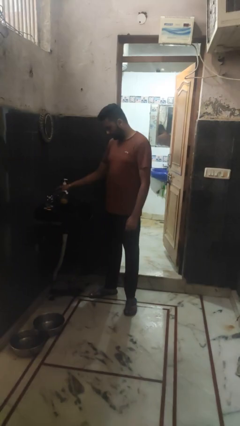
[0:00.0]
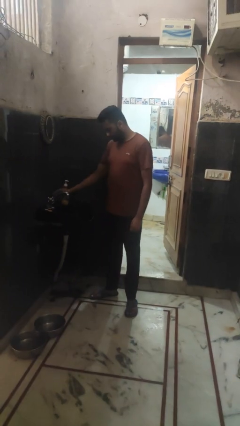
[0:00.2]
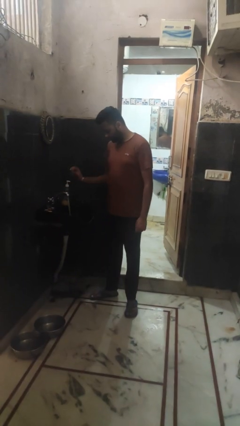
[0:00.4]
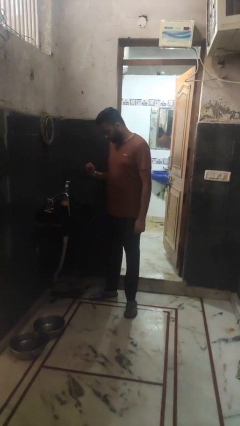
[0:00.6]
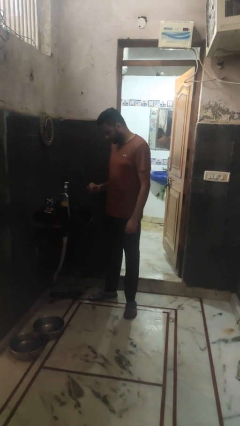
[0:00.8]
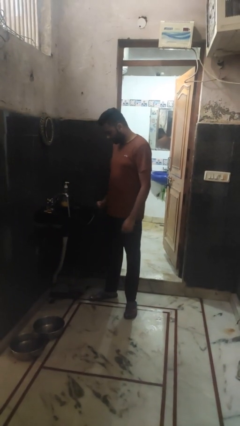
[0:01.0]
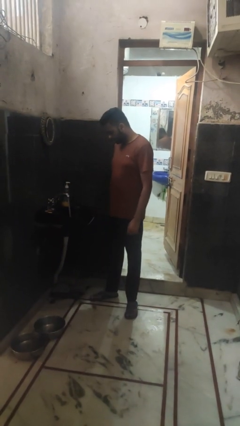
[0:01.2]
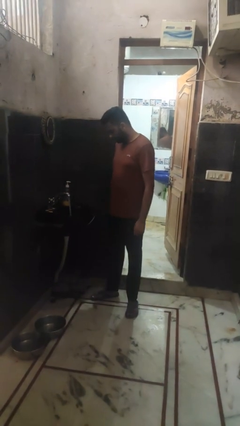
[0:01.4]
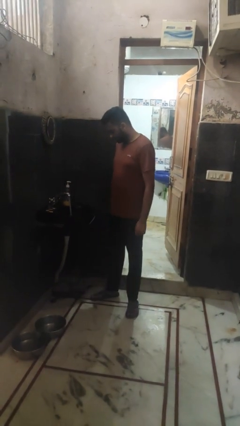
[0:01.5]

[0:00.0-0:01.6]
person turns on faucet

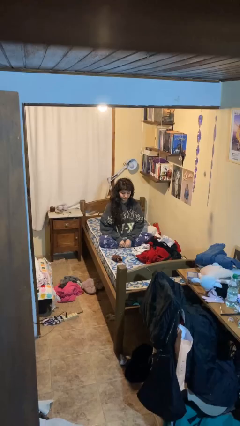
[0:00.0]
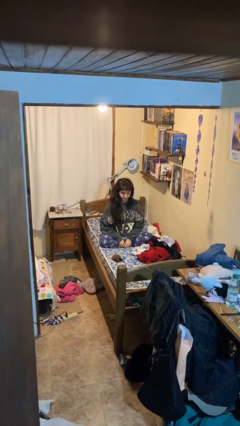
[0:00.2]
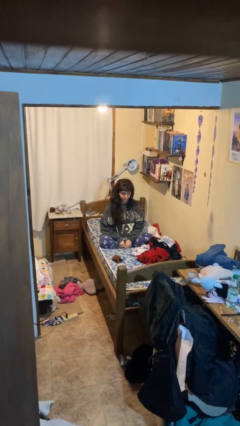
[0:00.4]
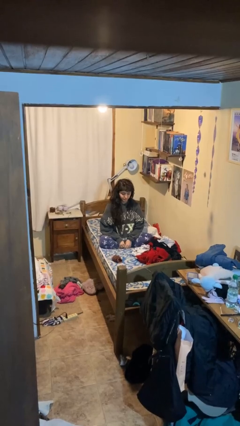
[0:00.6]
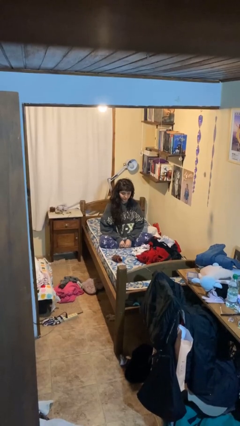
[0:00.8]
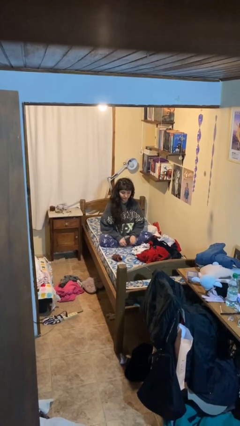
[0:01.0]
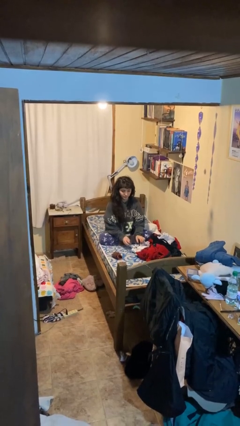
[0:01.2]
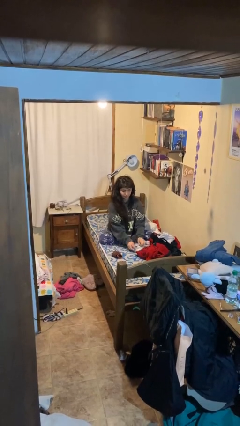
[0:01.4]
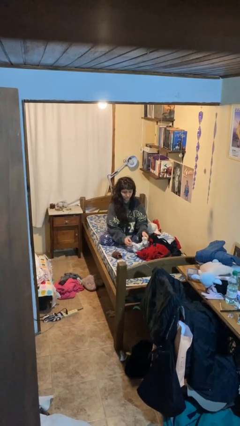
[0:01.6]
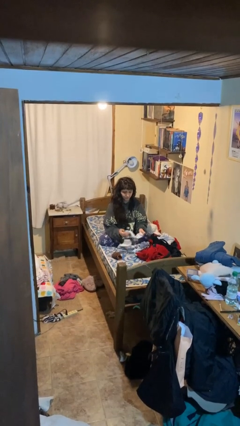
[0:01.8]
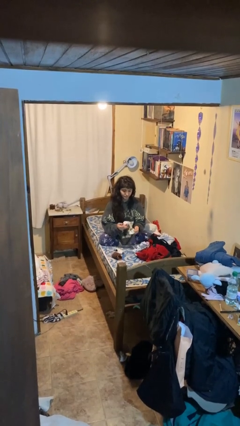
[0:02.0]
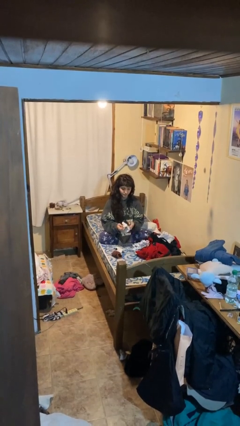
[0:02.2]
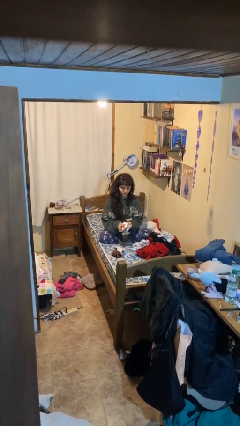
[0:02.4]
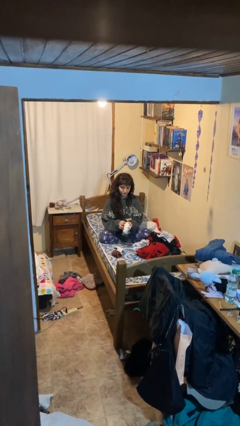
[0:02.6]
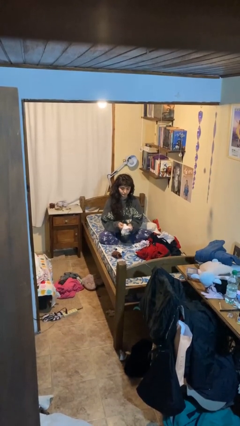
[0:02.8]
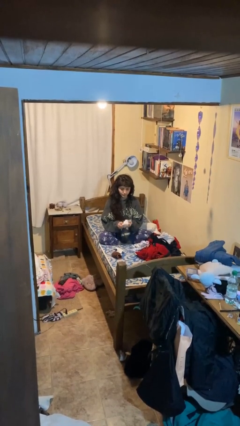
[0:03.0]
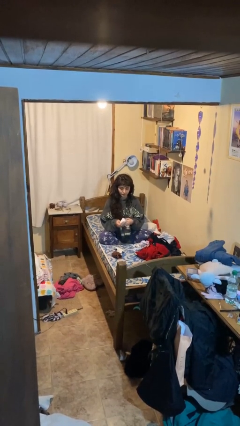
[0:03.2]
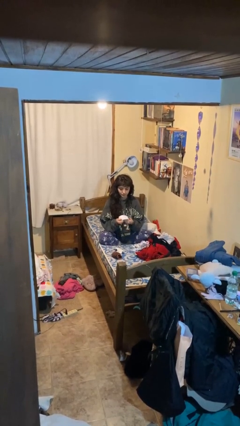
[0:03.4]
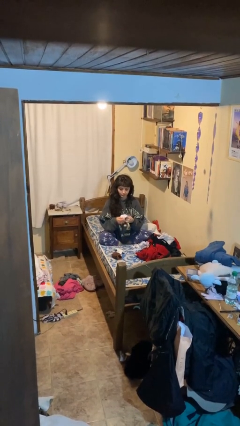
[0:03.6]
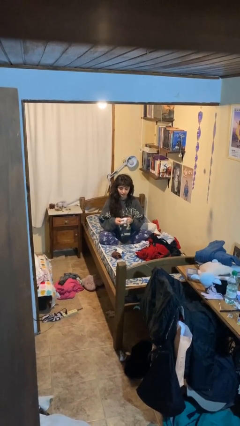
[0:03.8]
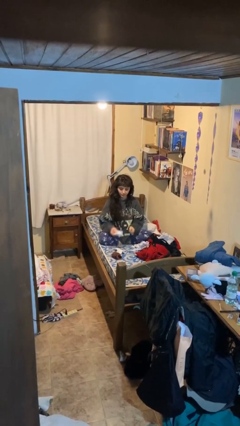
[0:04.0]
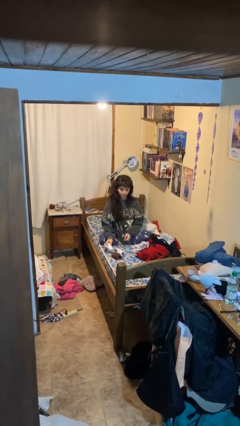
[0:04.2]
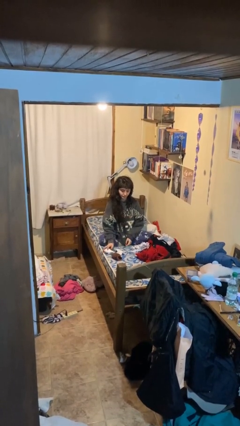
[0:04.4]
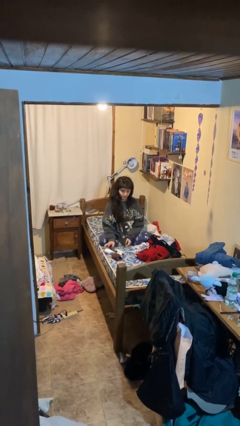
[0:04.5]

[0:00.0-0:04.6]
person folds socks

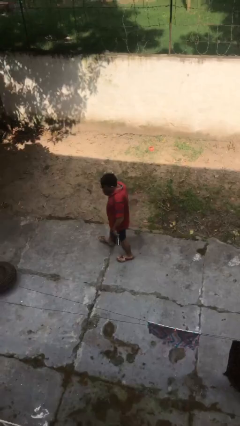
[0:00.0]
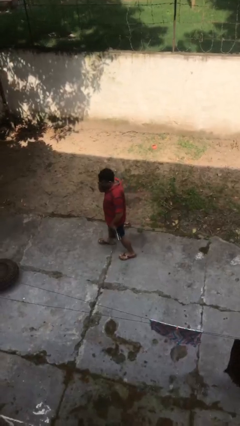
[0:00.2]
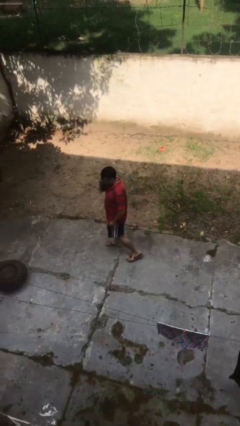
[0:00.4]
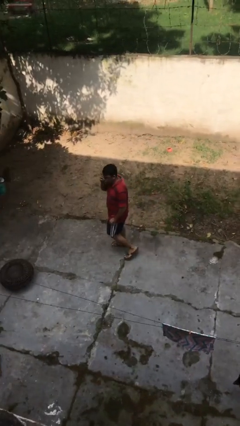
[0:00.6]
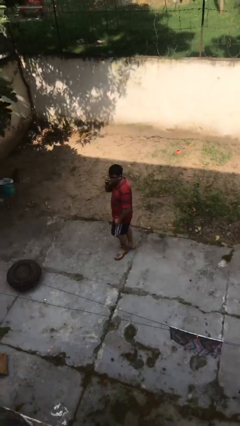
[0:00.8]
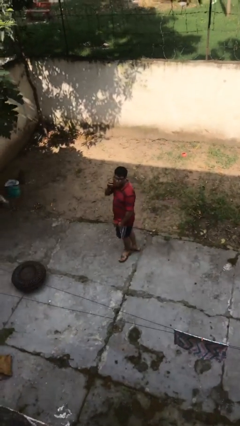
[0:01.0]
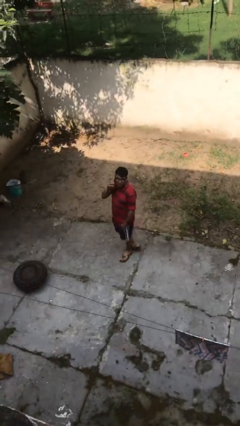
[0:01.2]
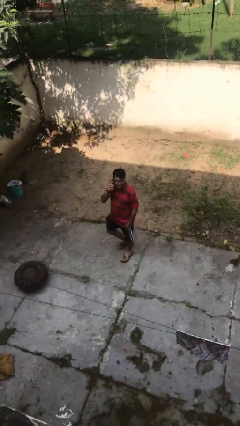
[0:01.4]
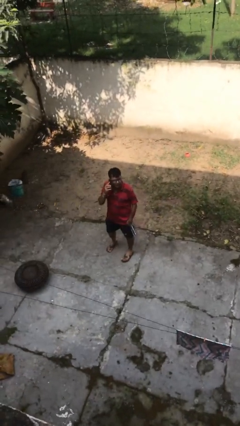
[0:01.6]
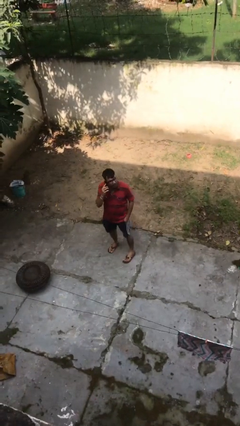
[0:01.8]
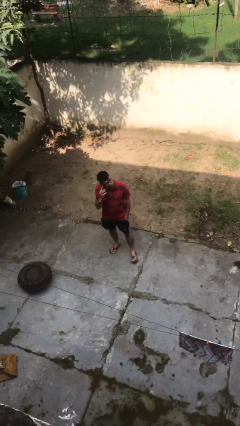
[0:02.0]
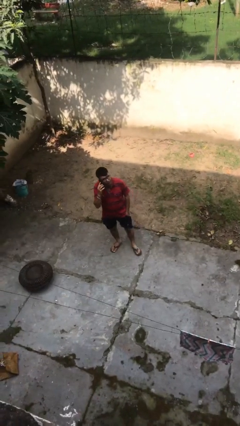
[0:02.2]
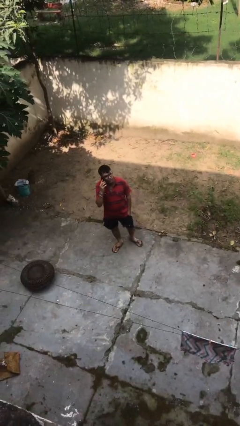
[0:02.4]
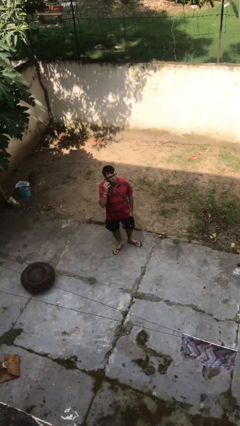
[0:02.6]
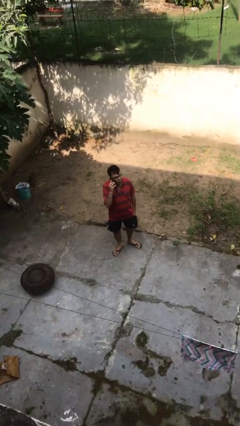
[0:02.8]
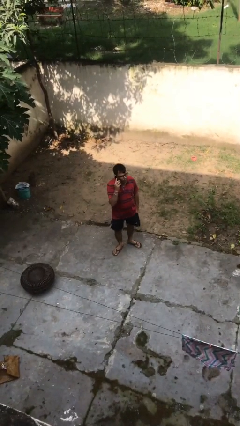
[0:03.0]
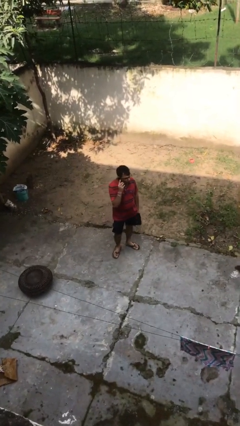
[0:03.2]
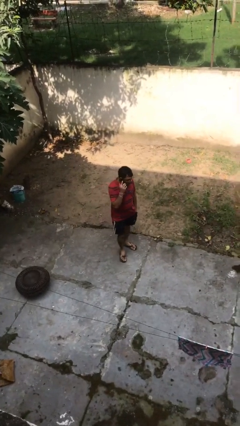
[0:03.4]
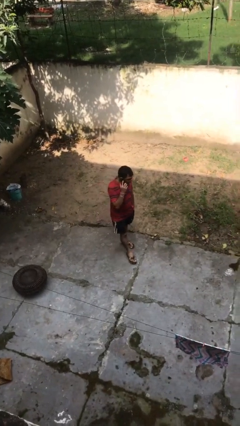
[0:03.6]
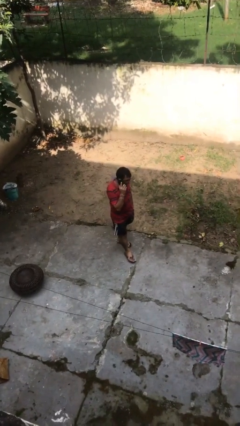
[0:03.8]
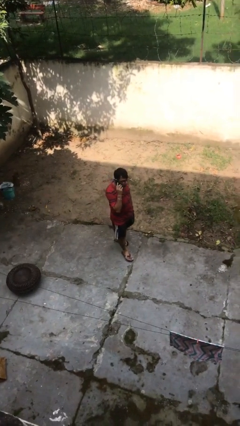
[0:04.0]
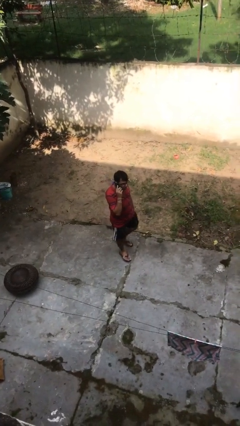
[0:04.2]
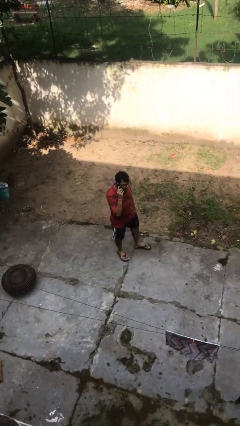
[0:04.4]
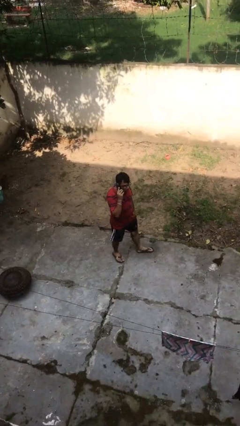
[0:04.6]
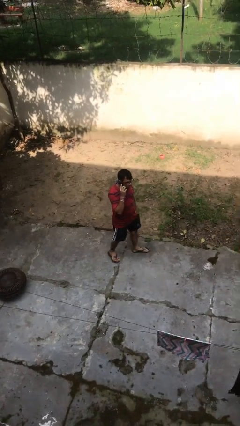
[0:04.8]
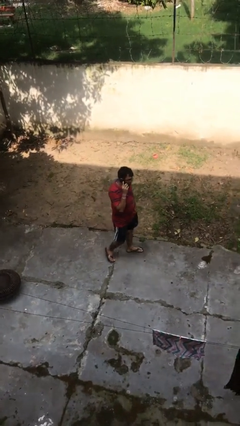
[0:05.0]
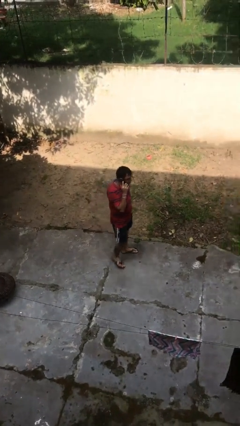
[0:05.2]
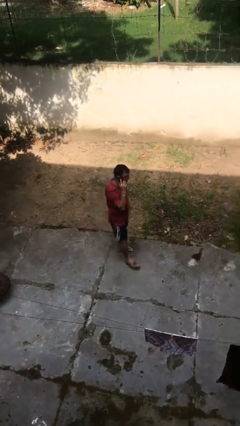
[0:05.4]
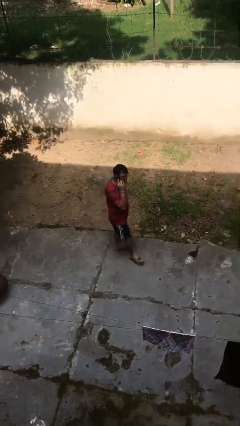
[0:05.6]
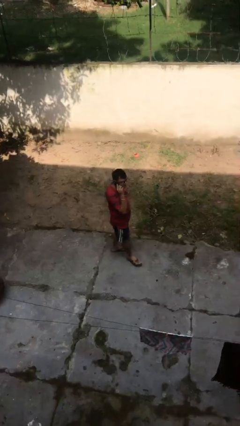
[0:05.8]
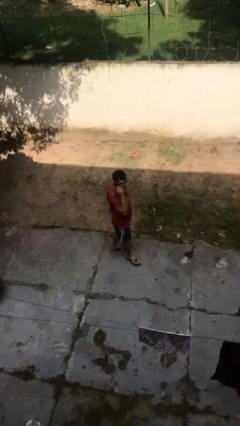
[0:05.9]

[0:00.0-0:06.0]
person talks on phone

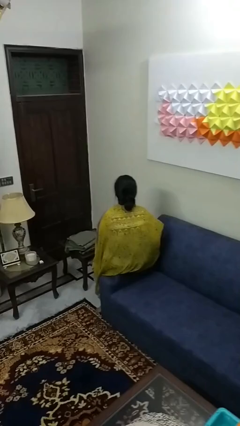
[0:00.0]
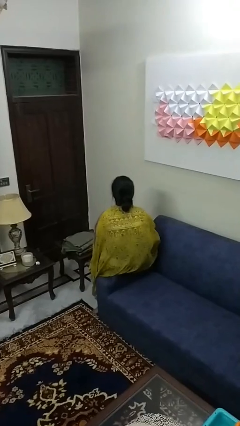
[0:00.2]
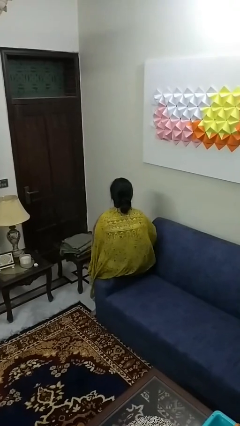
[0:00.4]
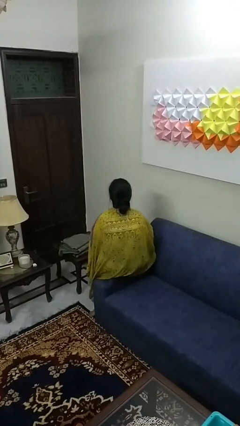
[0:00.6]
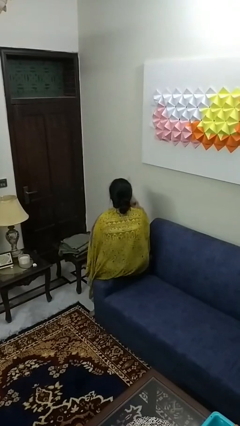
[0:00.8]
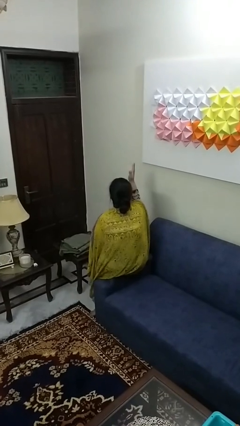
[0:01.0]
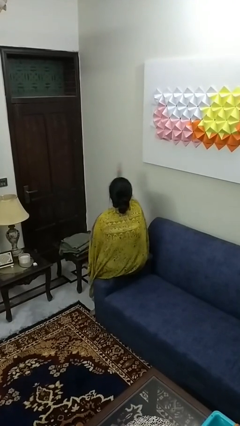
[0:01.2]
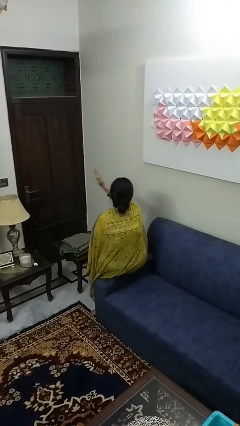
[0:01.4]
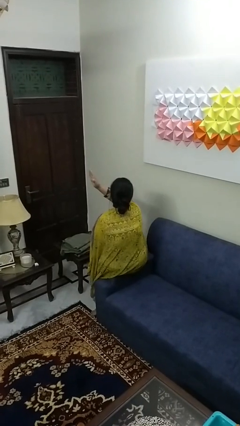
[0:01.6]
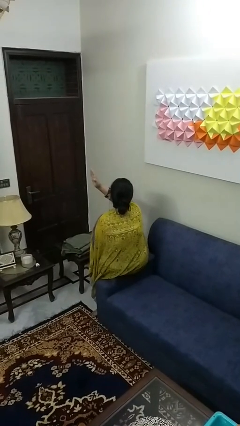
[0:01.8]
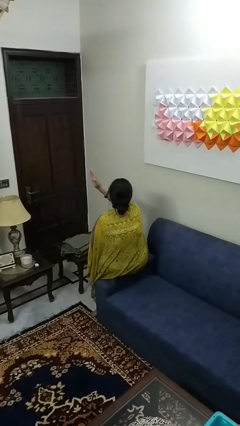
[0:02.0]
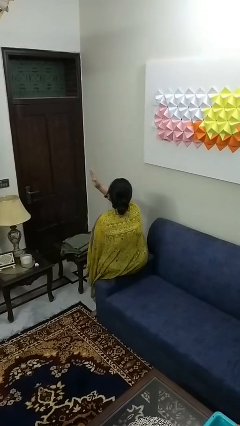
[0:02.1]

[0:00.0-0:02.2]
person gestures swipe left

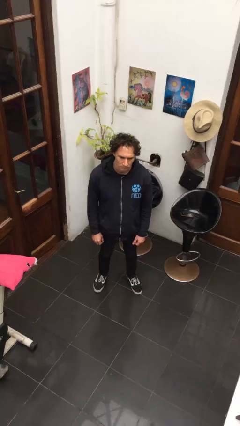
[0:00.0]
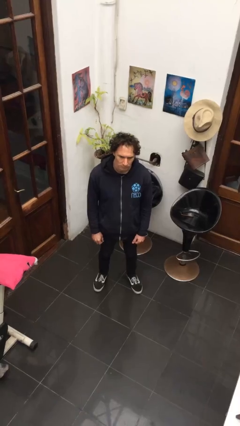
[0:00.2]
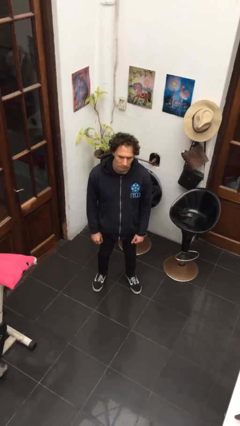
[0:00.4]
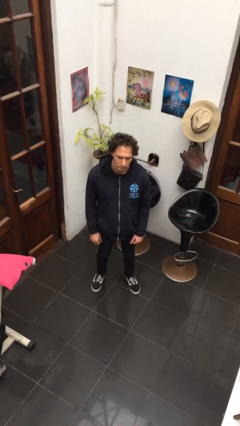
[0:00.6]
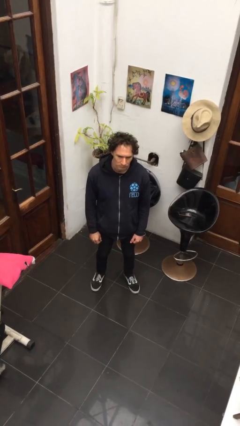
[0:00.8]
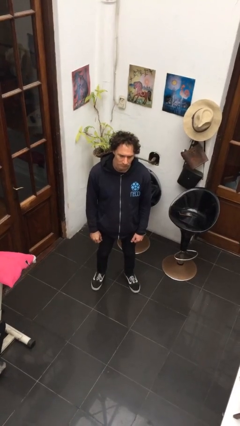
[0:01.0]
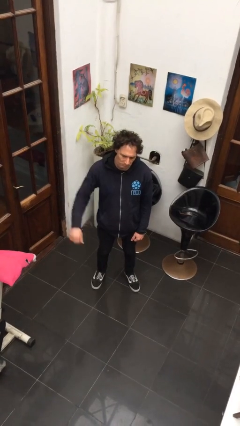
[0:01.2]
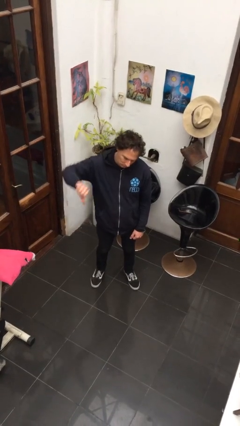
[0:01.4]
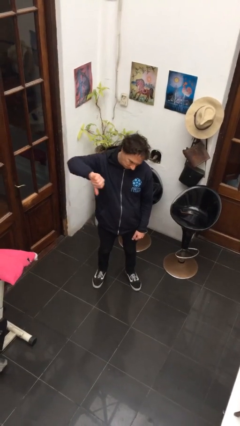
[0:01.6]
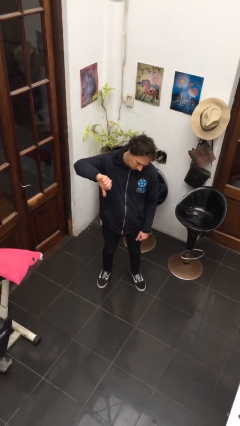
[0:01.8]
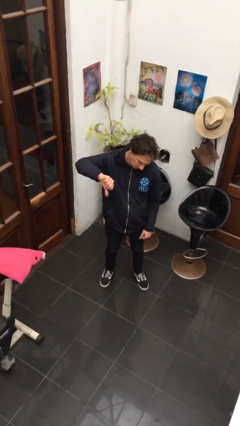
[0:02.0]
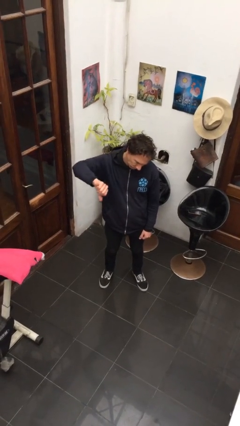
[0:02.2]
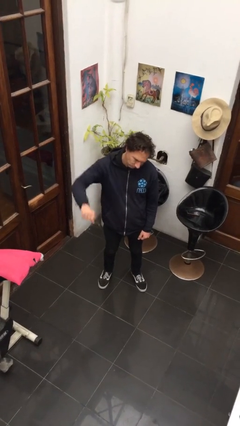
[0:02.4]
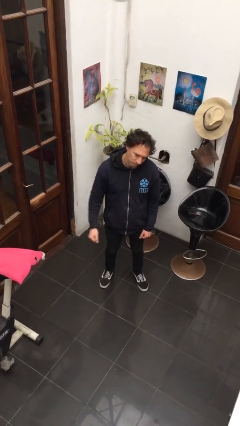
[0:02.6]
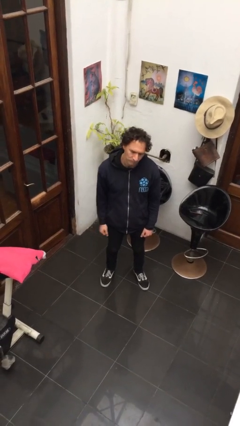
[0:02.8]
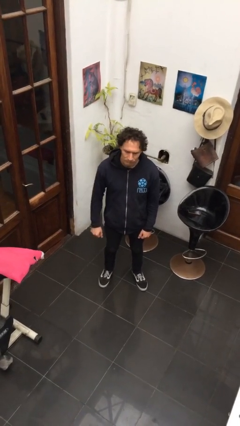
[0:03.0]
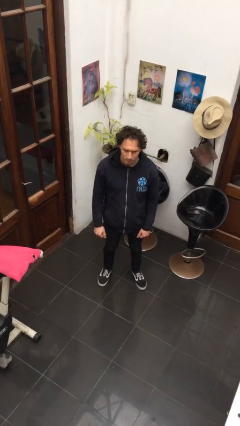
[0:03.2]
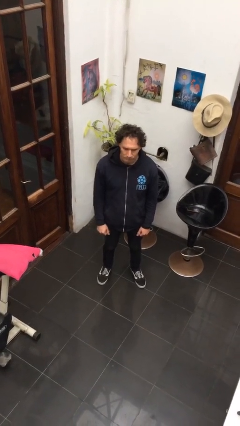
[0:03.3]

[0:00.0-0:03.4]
person gestures thumbs down
